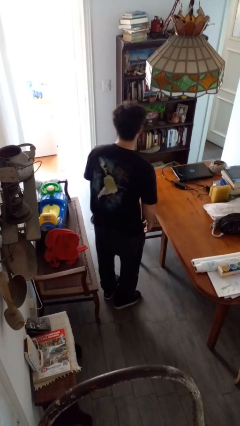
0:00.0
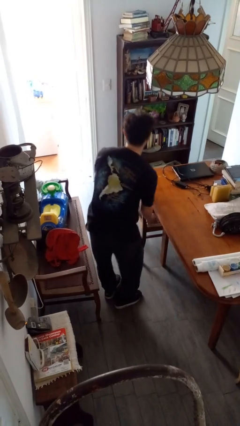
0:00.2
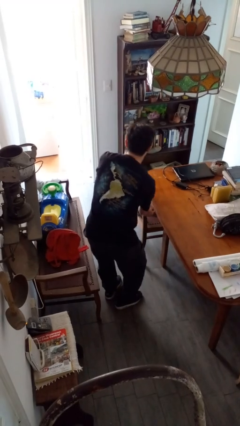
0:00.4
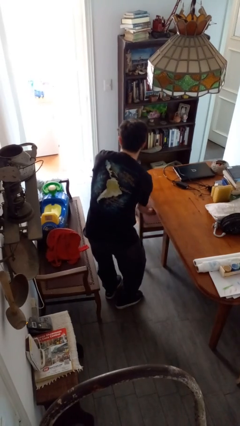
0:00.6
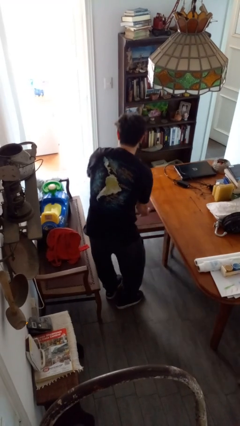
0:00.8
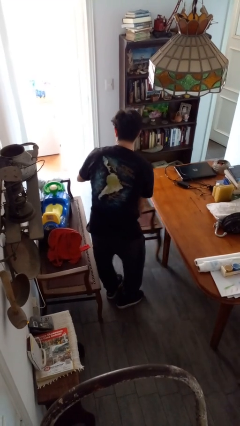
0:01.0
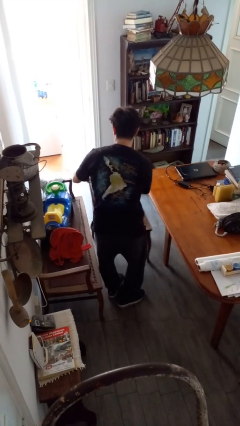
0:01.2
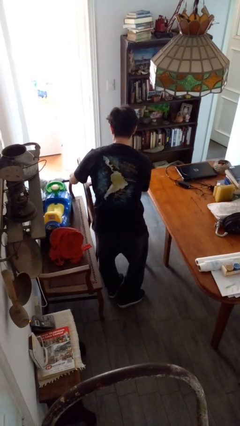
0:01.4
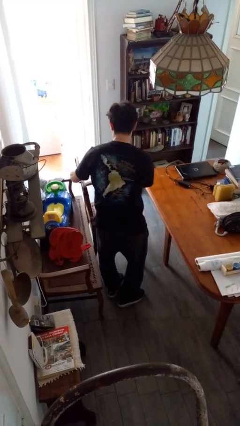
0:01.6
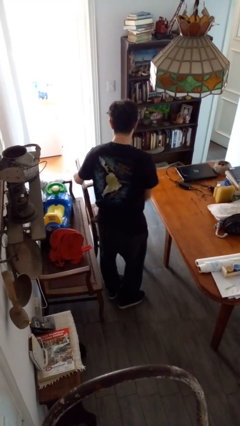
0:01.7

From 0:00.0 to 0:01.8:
person pulls out chair

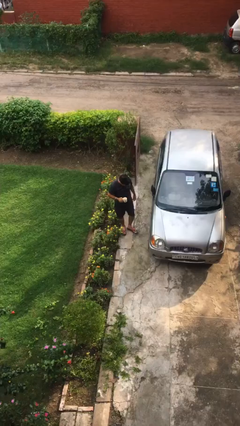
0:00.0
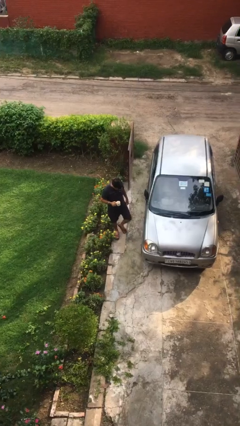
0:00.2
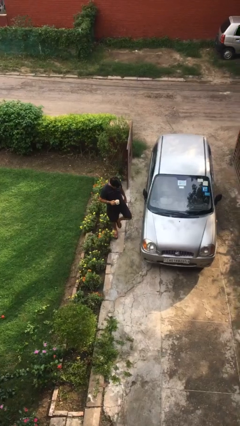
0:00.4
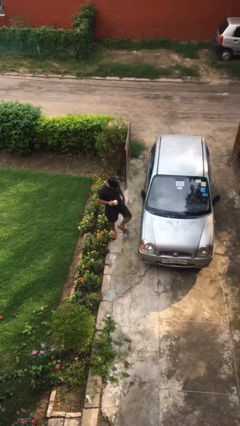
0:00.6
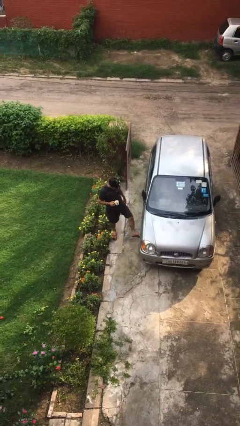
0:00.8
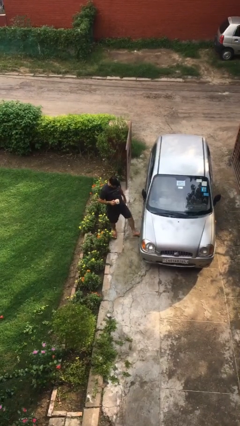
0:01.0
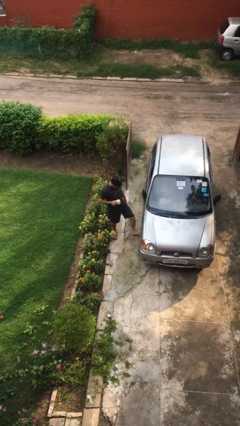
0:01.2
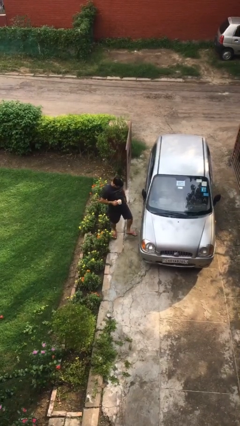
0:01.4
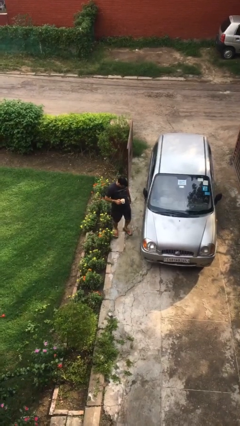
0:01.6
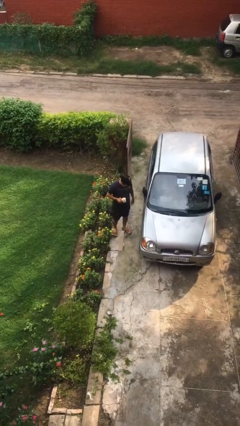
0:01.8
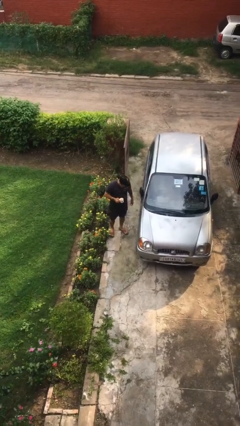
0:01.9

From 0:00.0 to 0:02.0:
person kicks car tires

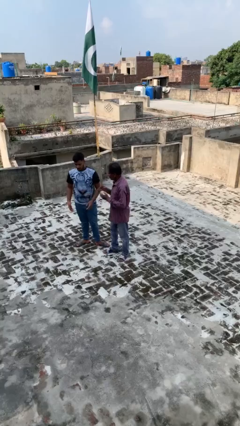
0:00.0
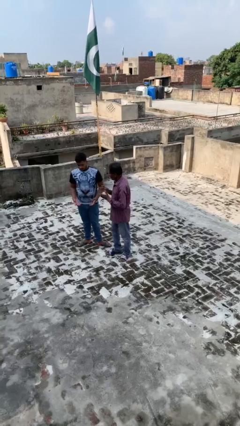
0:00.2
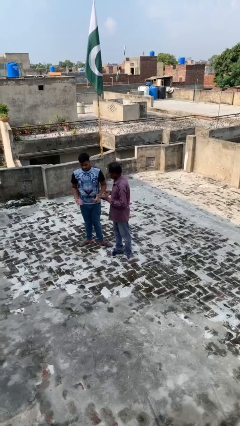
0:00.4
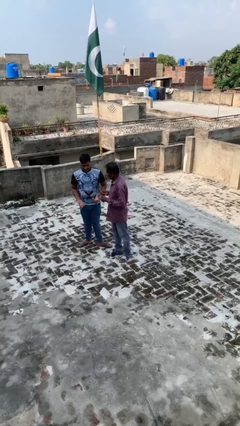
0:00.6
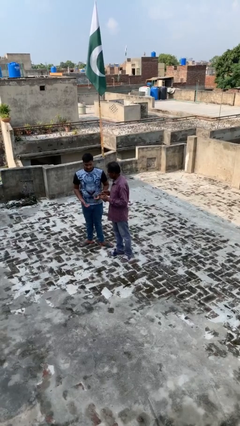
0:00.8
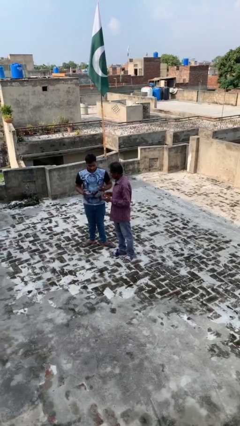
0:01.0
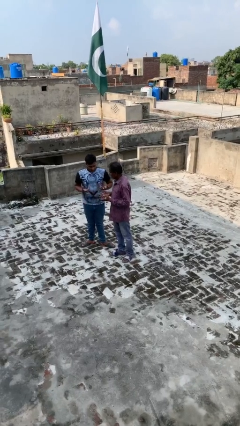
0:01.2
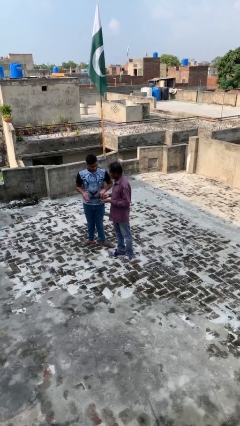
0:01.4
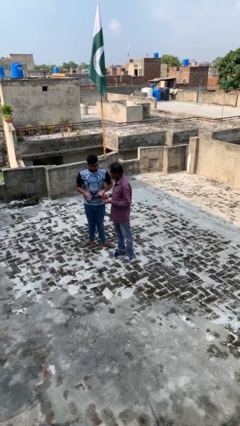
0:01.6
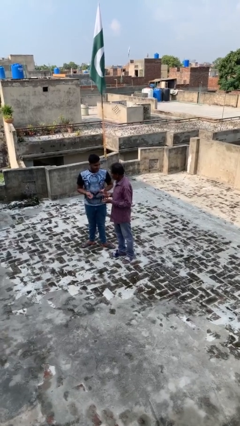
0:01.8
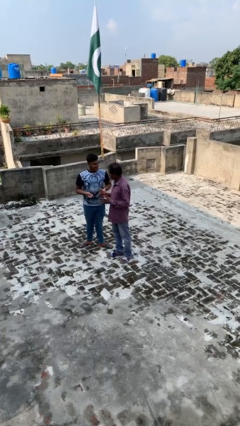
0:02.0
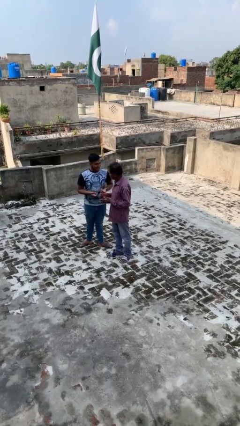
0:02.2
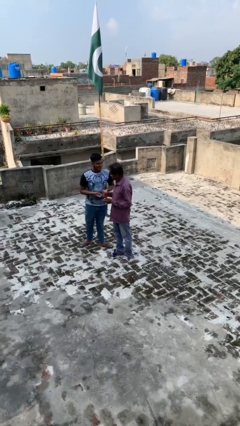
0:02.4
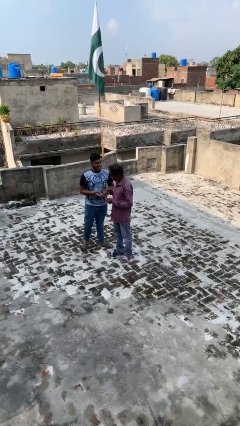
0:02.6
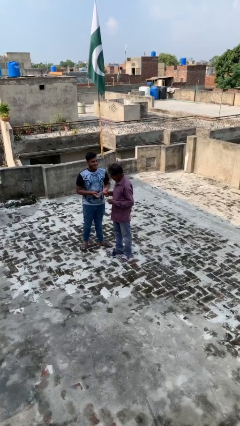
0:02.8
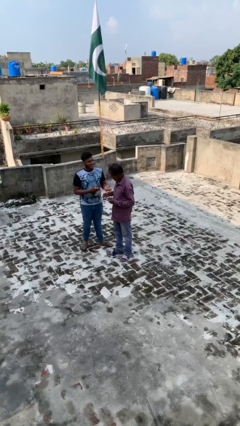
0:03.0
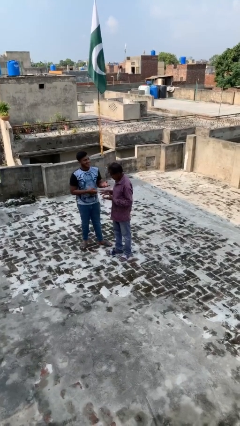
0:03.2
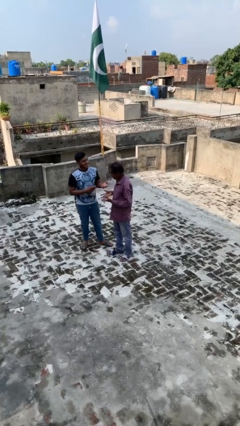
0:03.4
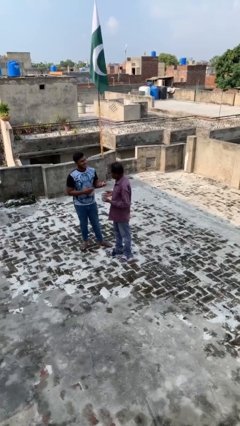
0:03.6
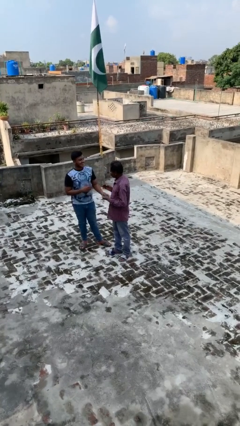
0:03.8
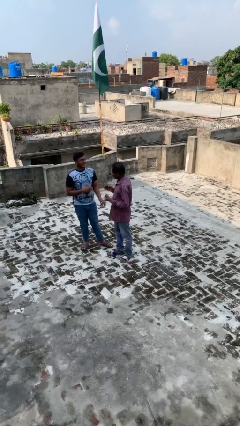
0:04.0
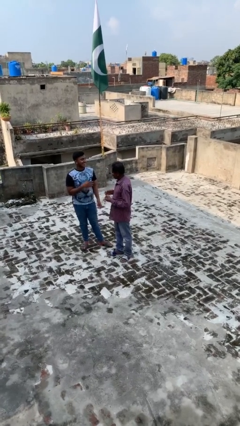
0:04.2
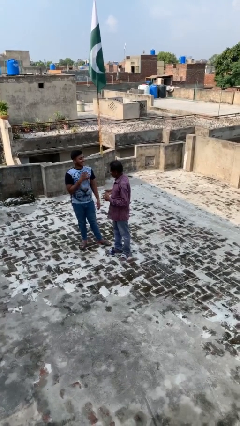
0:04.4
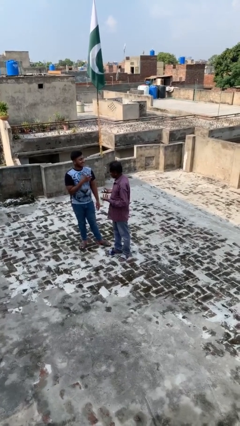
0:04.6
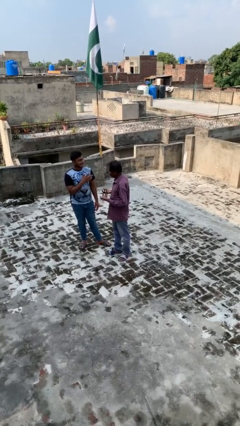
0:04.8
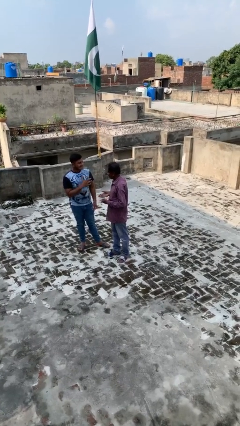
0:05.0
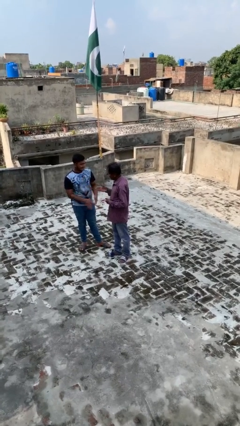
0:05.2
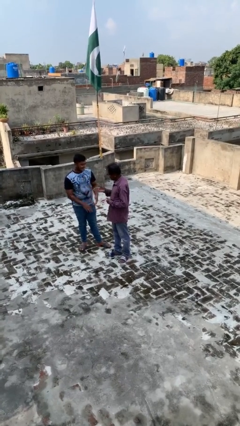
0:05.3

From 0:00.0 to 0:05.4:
person talks to person

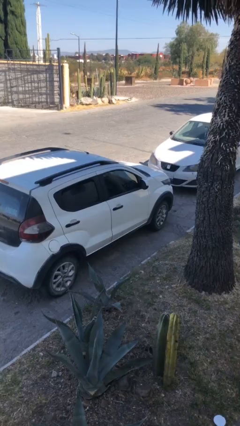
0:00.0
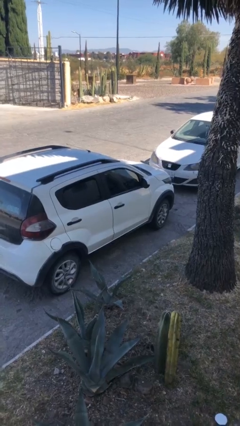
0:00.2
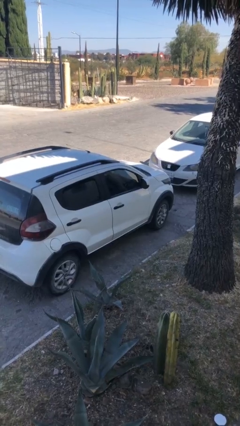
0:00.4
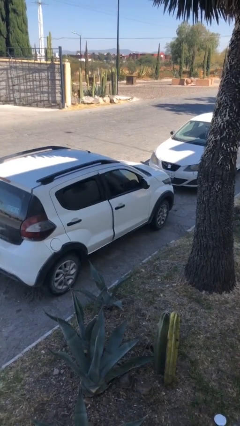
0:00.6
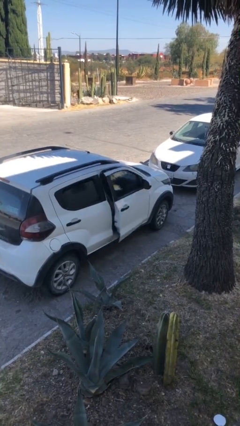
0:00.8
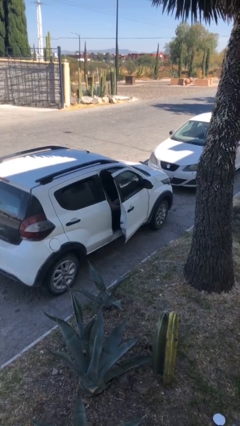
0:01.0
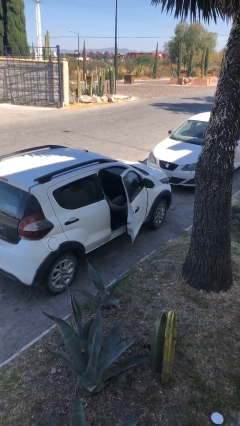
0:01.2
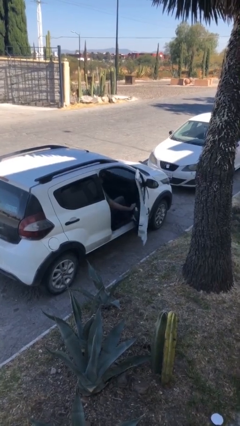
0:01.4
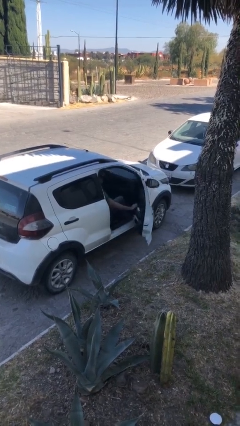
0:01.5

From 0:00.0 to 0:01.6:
person opens car door

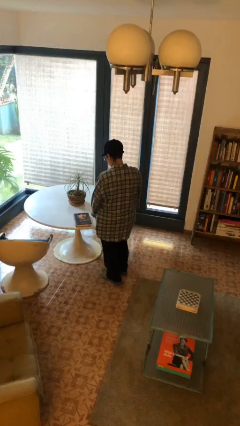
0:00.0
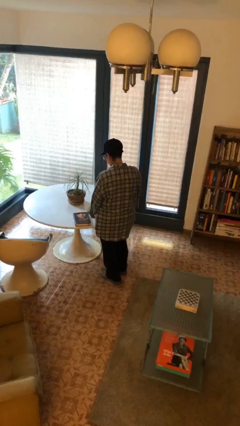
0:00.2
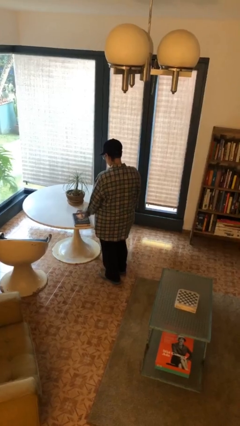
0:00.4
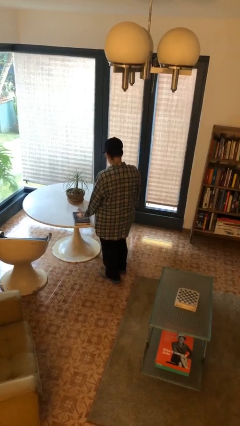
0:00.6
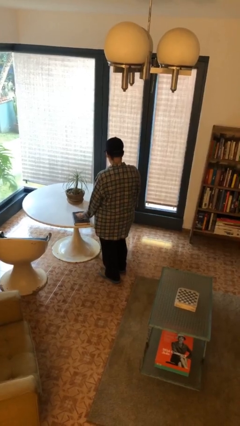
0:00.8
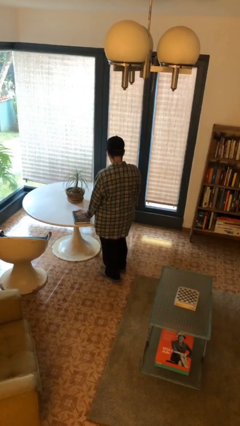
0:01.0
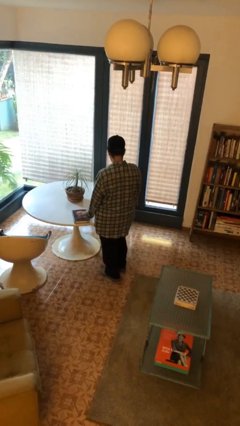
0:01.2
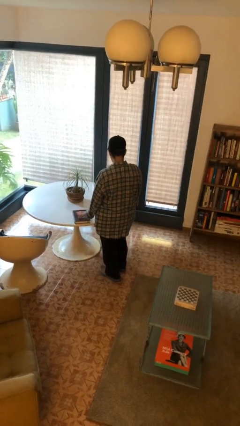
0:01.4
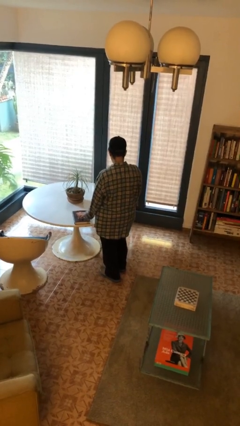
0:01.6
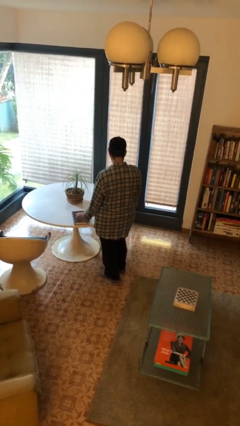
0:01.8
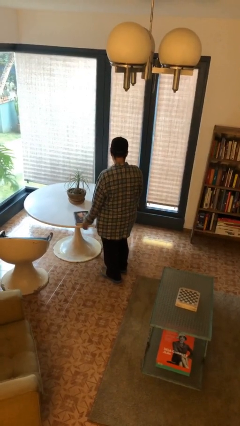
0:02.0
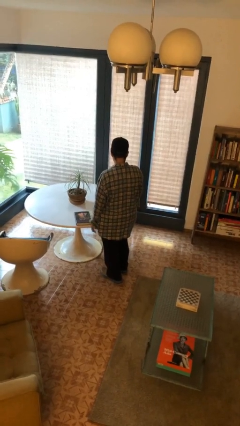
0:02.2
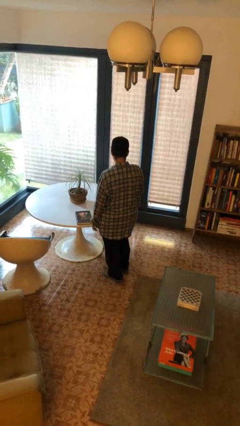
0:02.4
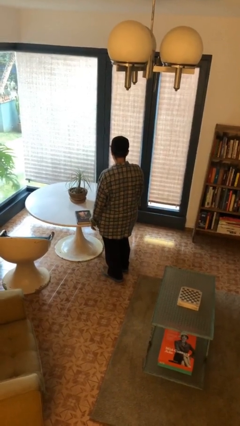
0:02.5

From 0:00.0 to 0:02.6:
person taps object with finger

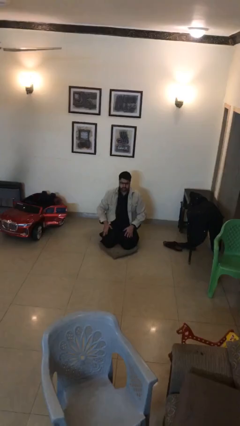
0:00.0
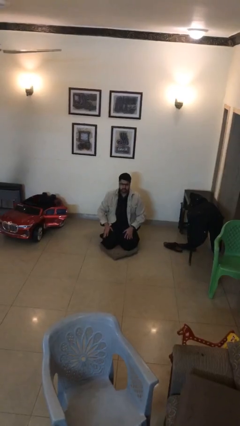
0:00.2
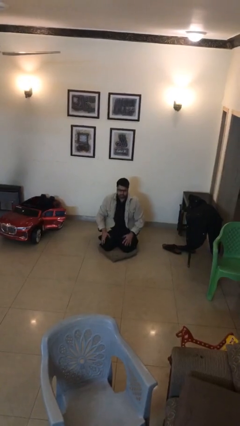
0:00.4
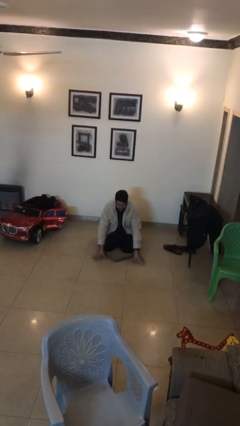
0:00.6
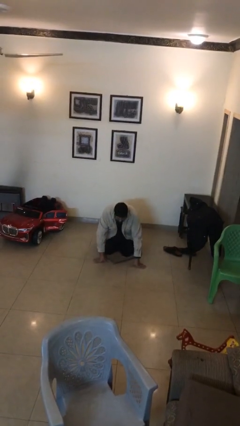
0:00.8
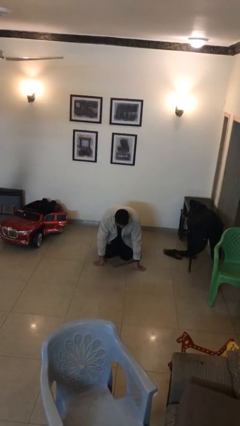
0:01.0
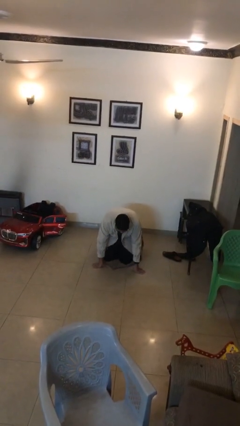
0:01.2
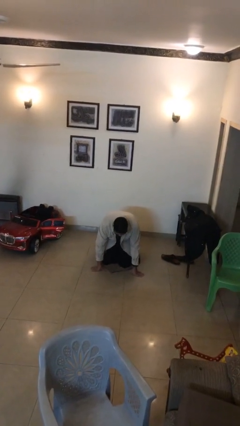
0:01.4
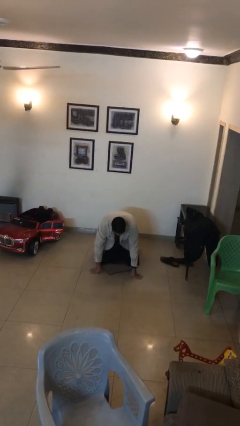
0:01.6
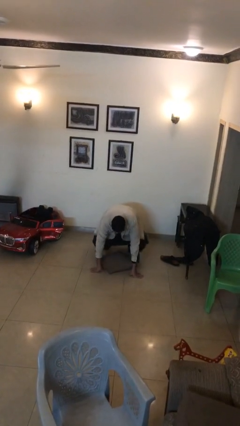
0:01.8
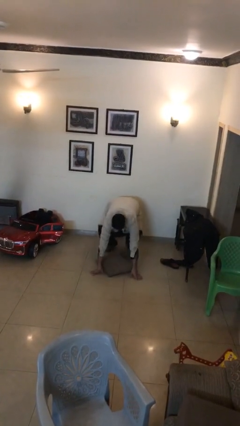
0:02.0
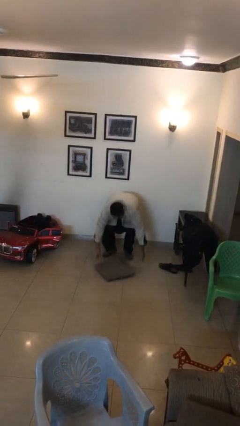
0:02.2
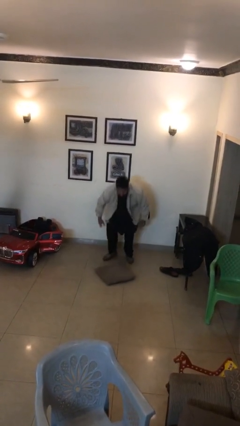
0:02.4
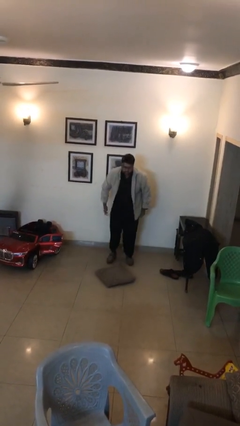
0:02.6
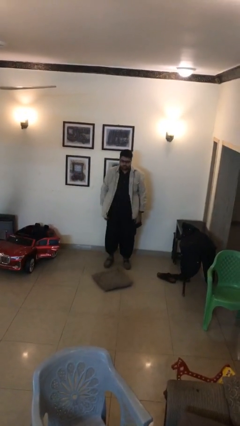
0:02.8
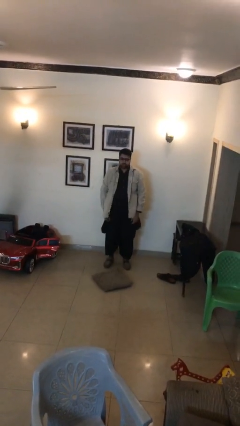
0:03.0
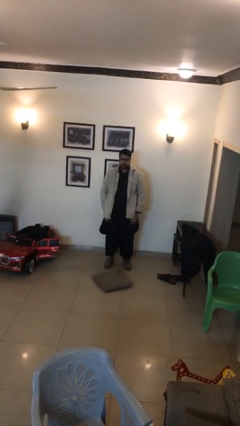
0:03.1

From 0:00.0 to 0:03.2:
person stands up

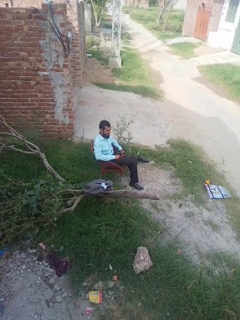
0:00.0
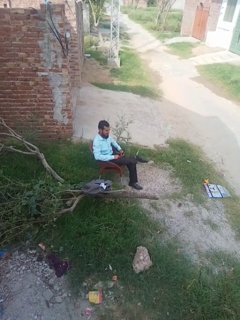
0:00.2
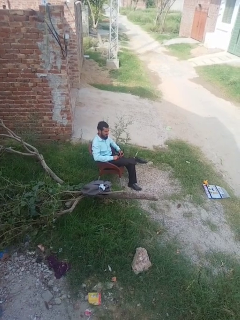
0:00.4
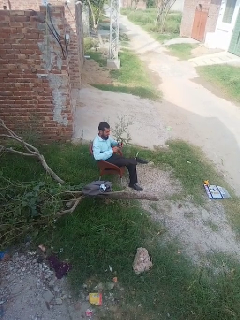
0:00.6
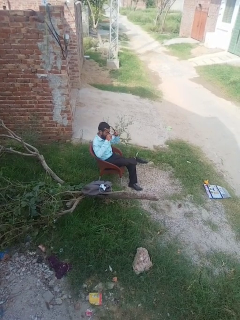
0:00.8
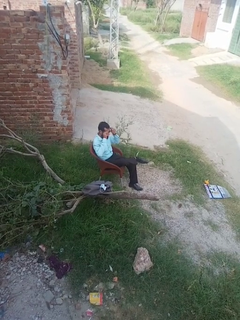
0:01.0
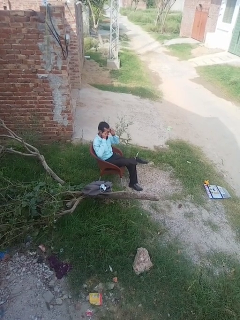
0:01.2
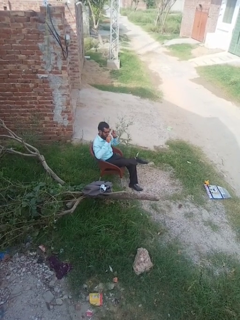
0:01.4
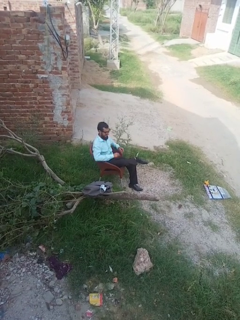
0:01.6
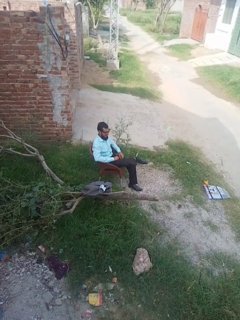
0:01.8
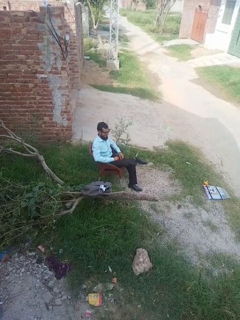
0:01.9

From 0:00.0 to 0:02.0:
person puts on glasses
